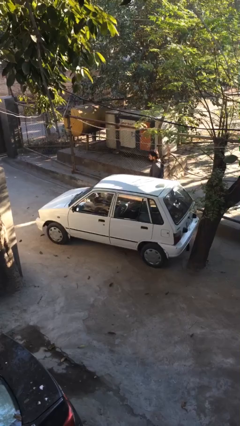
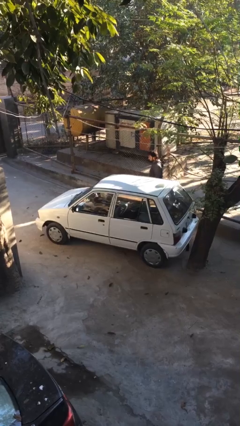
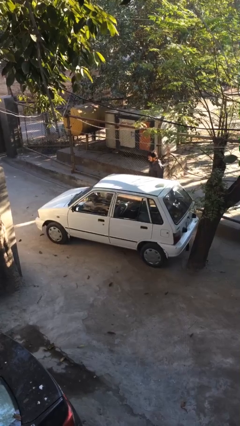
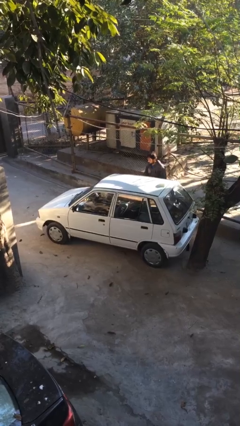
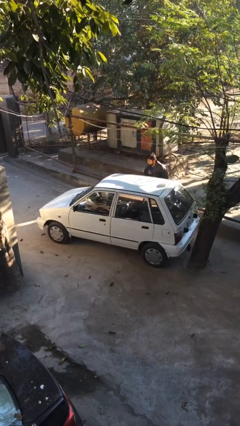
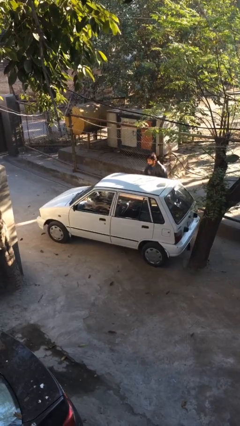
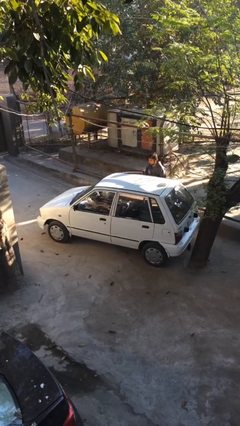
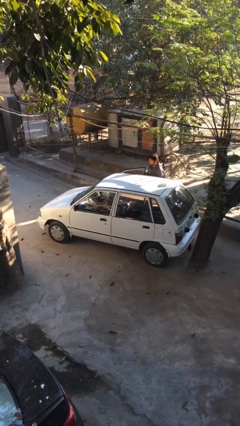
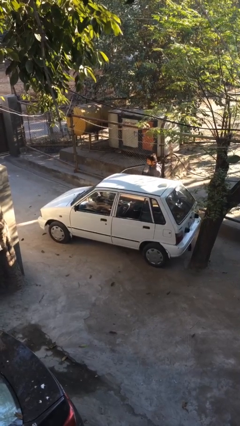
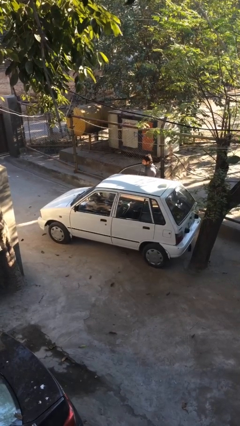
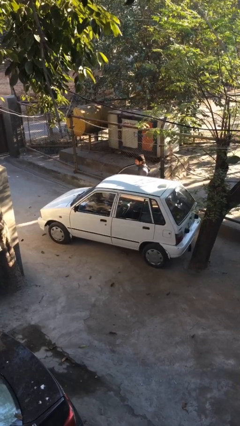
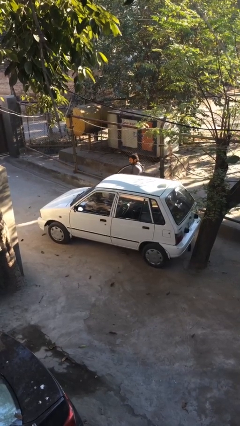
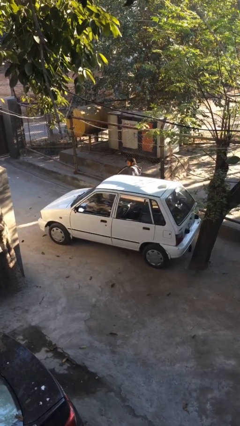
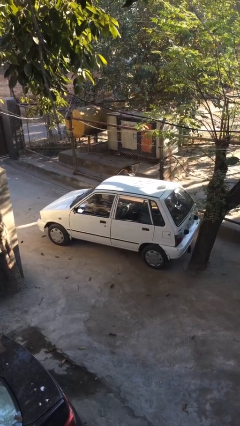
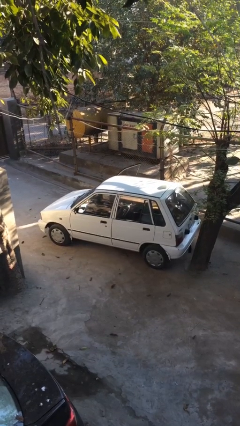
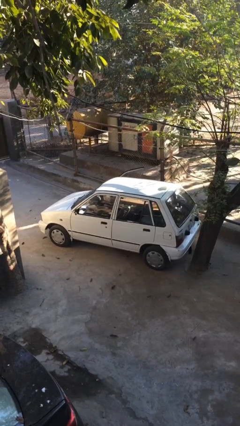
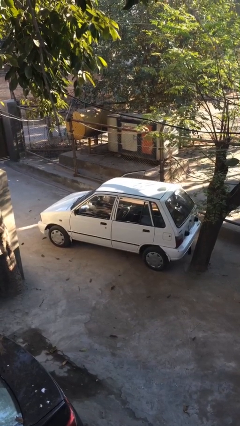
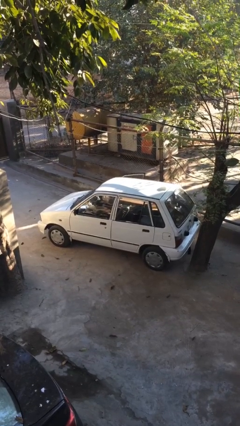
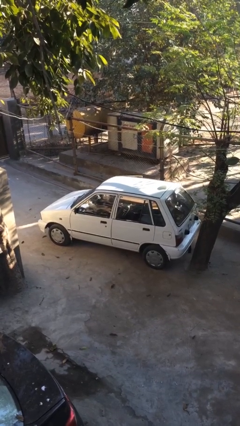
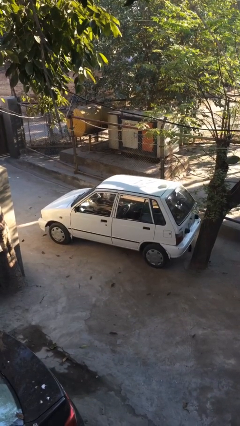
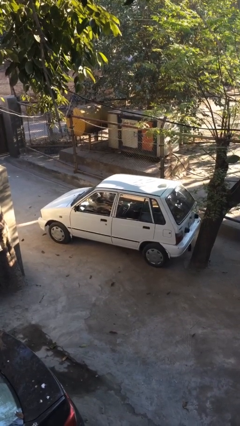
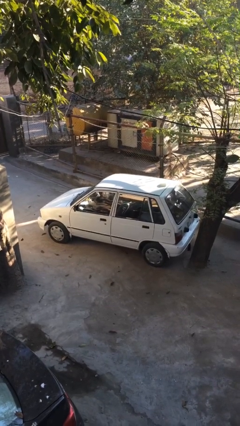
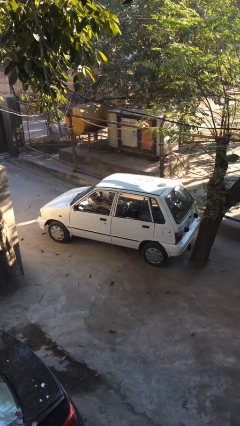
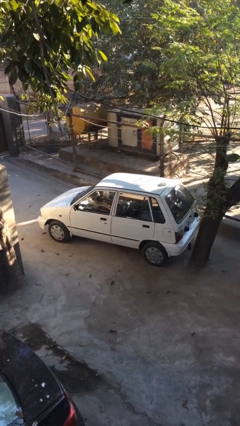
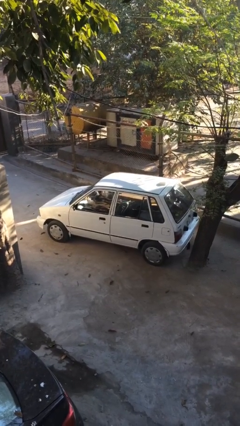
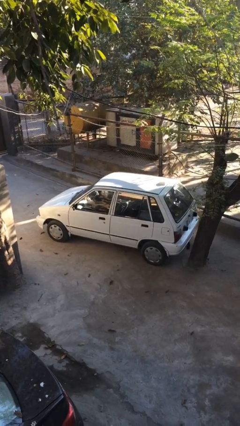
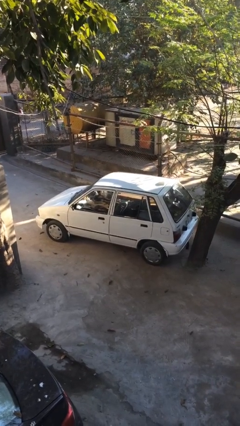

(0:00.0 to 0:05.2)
car picks up person

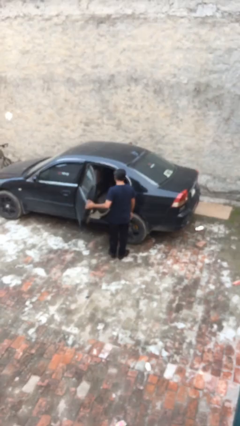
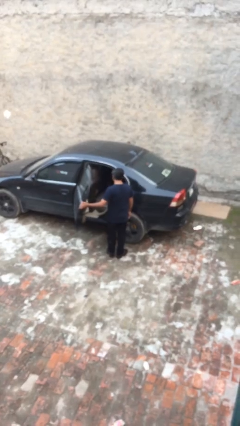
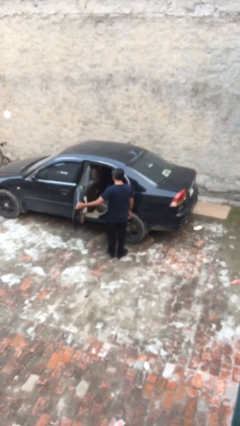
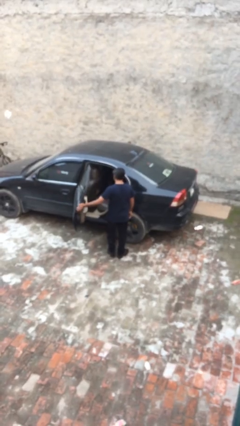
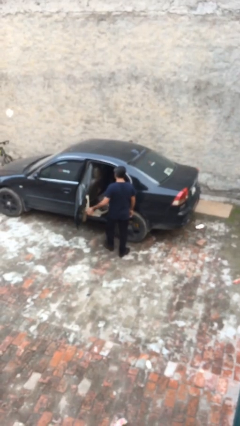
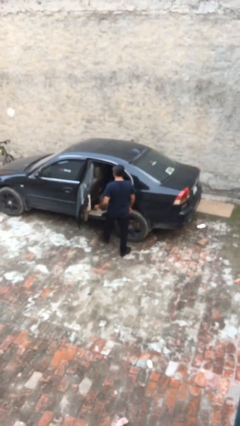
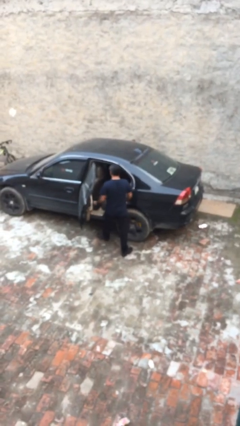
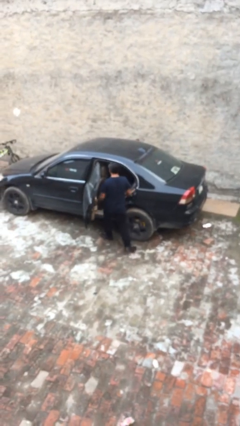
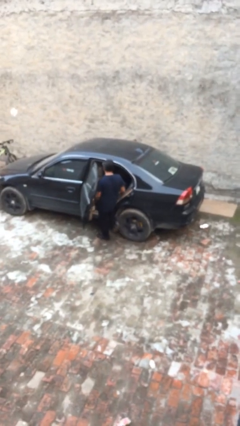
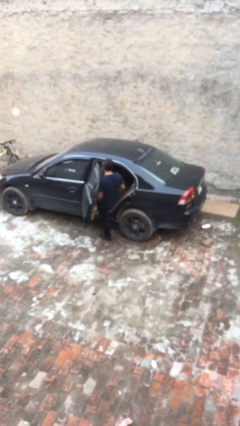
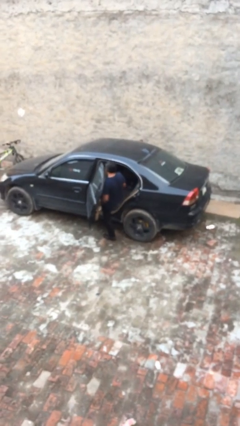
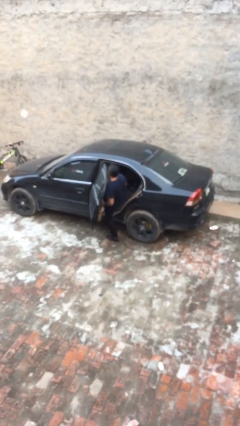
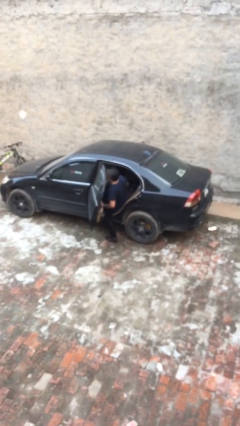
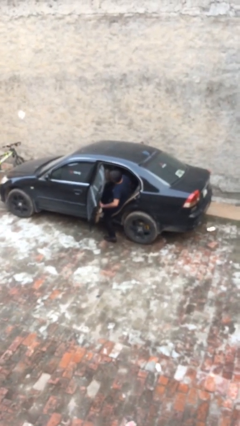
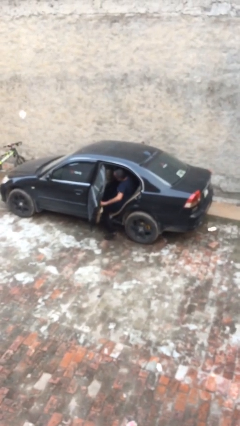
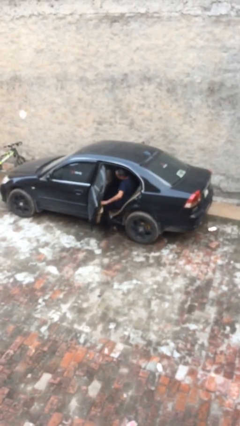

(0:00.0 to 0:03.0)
person enters car

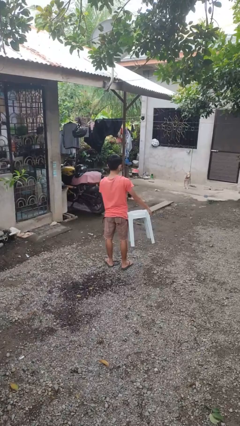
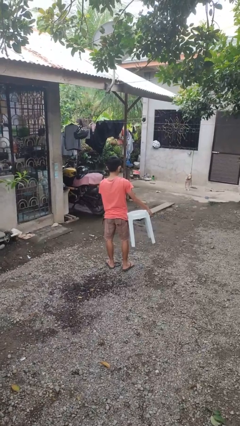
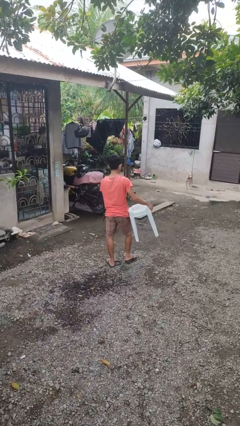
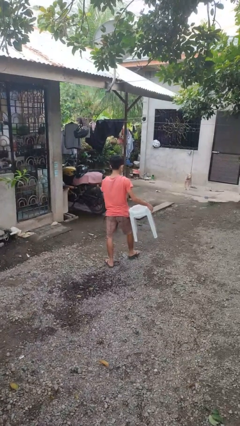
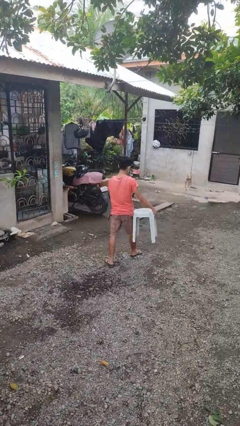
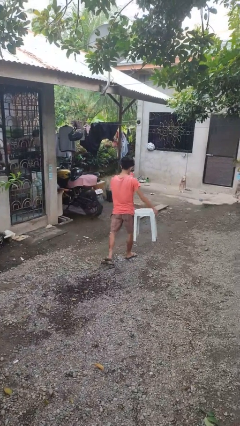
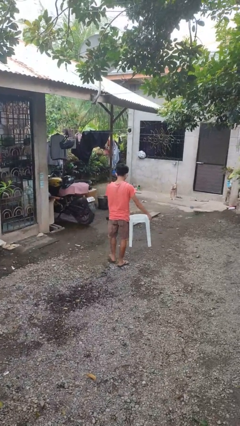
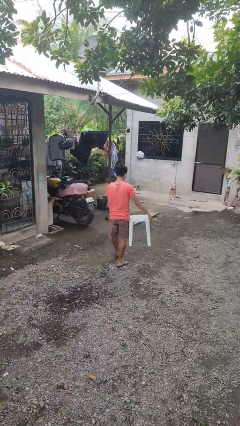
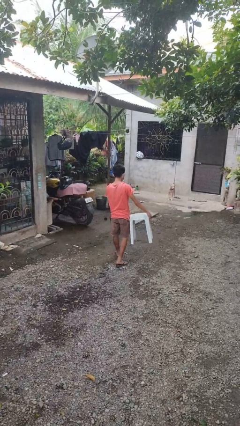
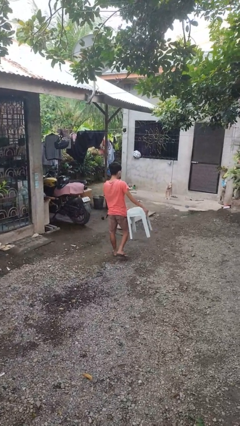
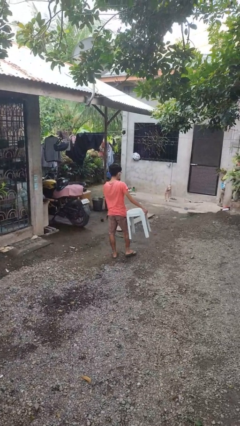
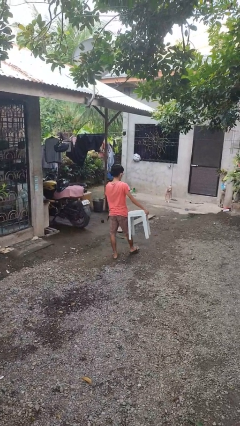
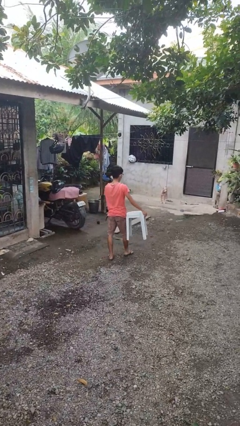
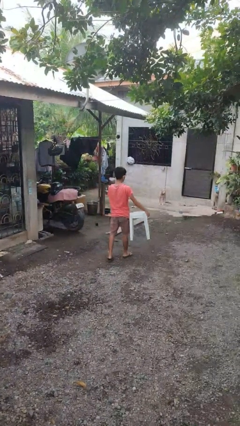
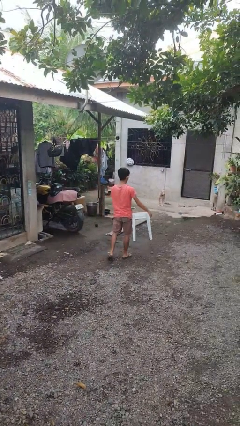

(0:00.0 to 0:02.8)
person carries furniture

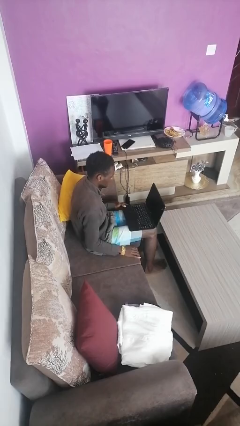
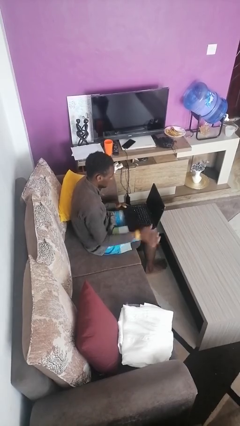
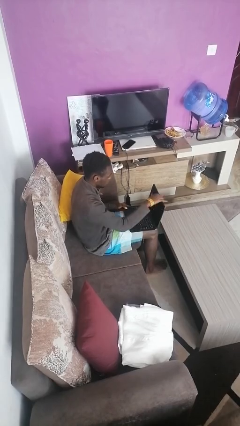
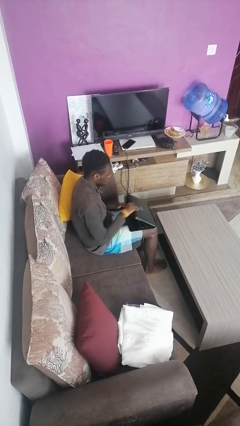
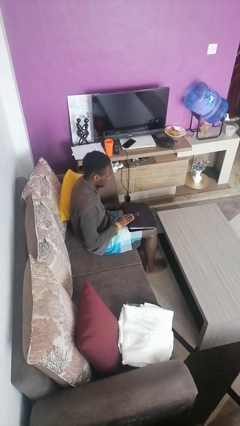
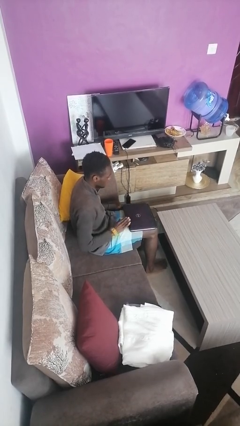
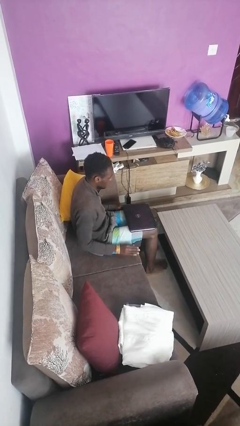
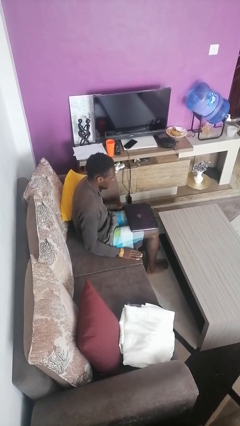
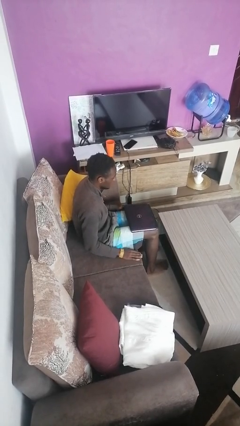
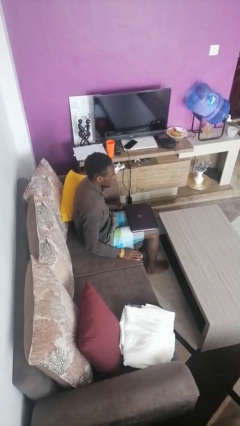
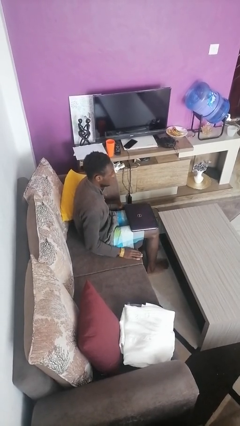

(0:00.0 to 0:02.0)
person closes laptop

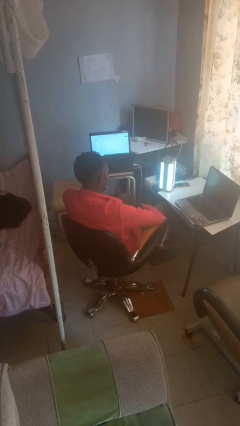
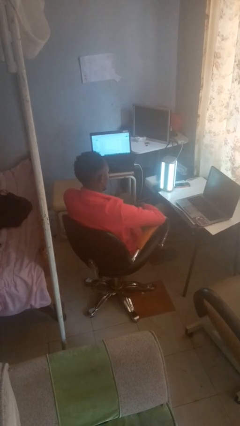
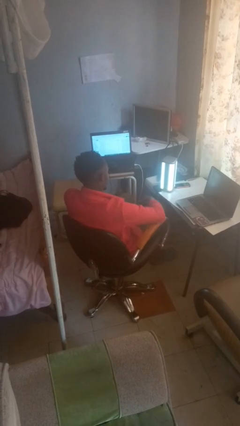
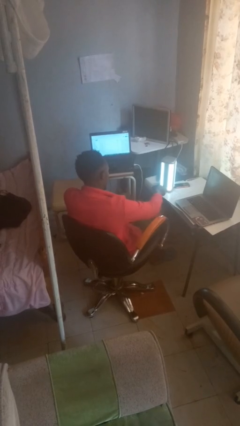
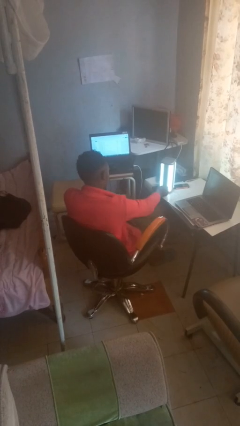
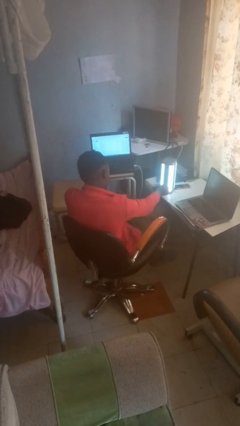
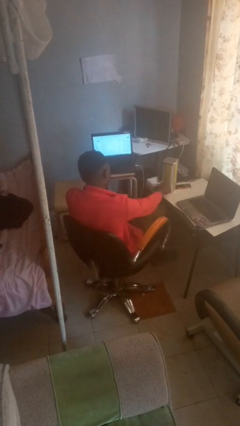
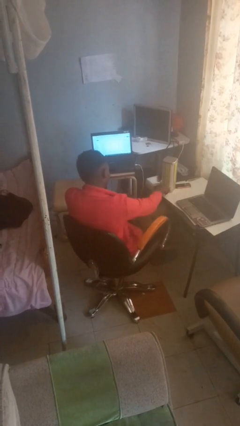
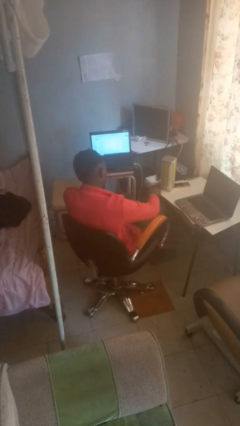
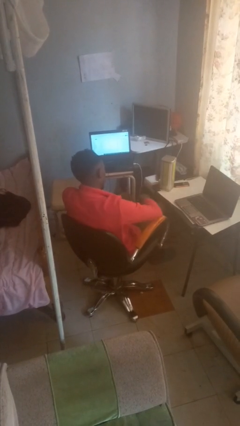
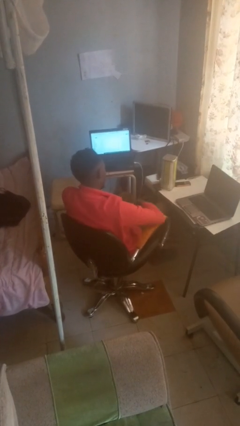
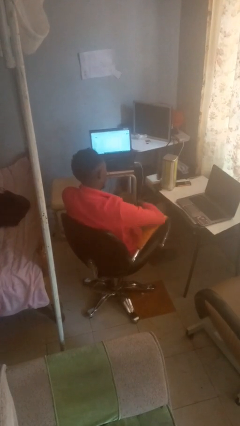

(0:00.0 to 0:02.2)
person turns off lamp

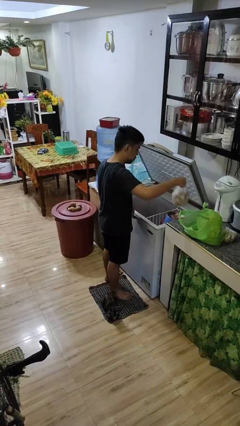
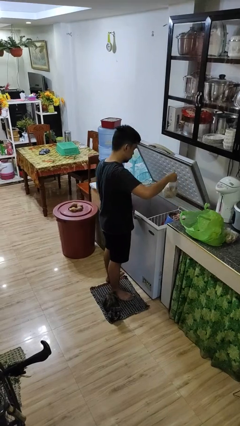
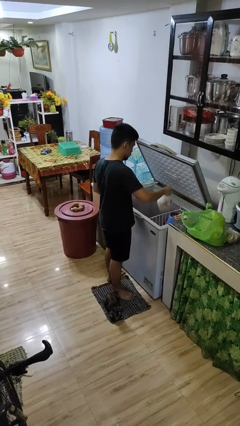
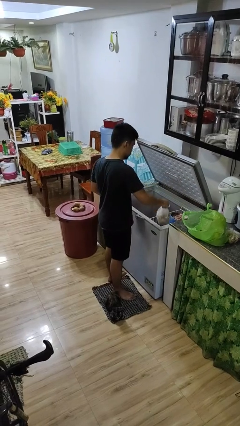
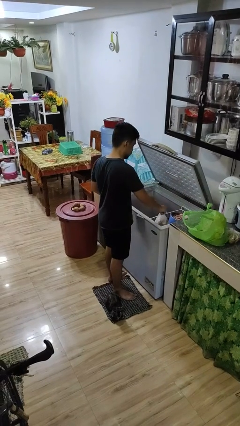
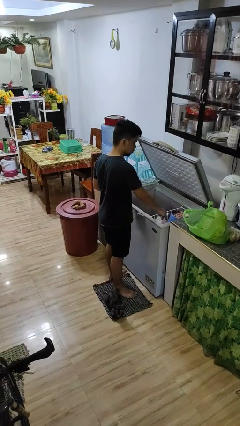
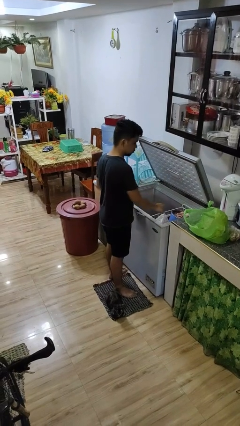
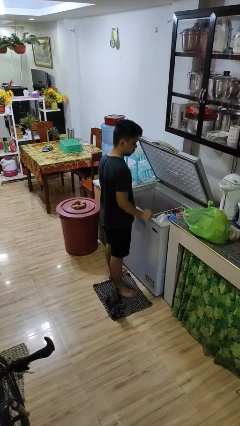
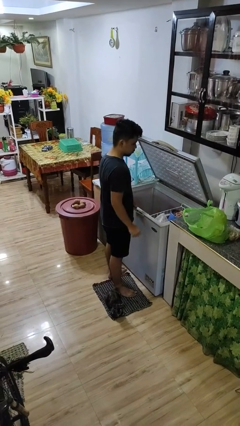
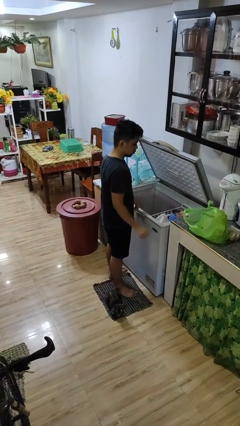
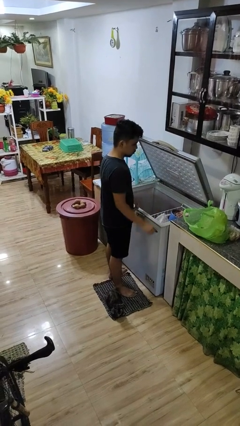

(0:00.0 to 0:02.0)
person loads groceries into refrigerator

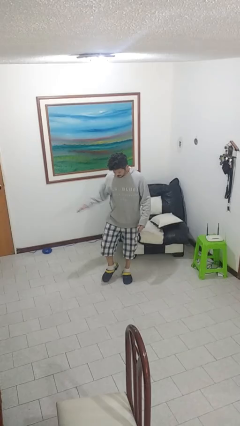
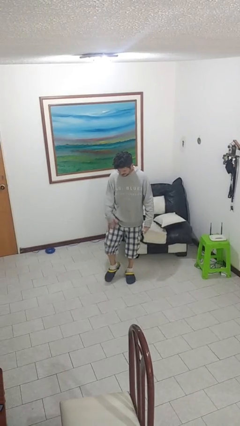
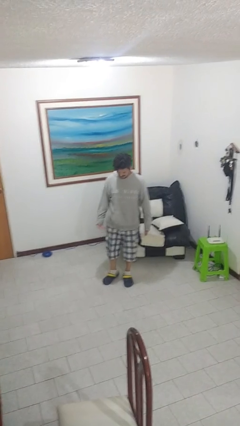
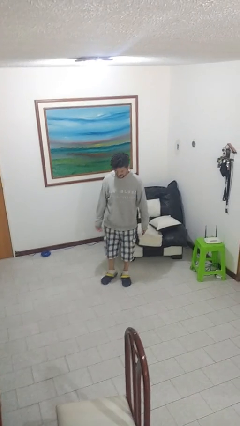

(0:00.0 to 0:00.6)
person swats bug
